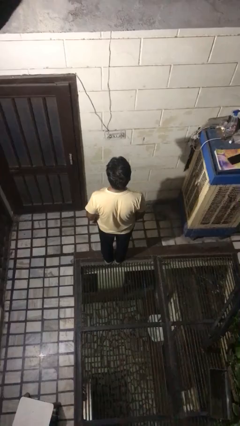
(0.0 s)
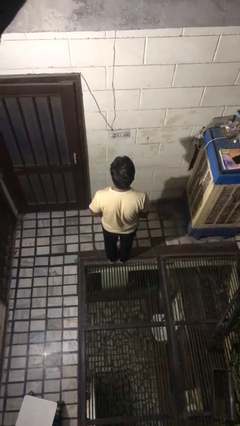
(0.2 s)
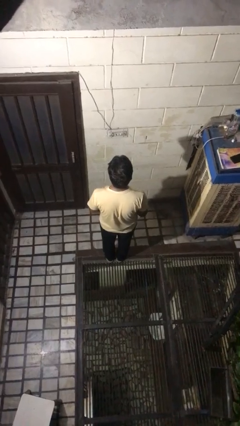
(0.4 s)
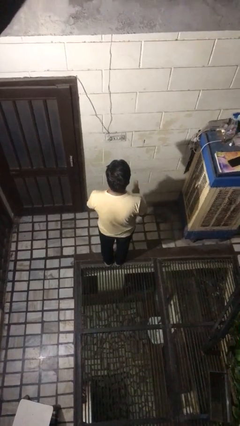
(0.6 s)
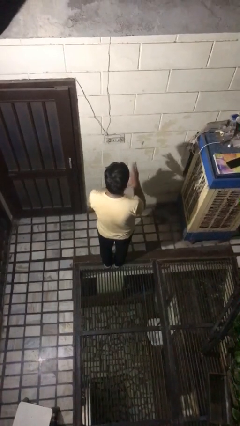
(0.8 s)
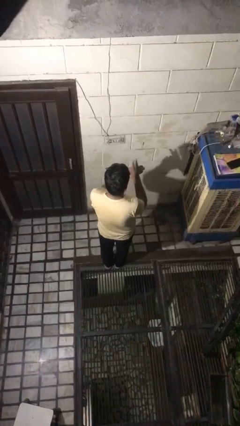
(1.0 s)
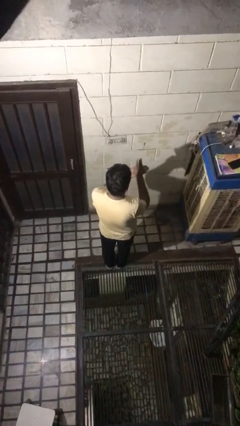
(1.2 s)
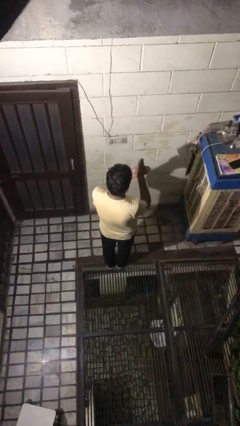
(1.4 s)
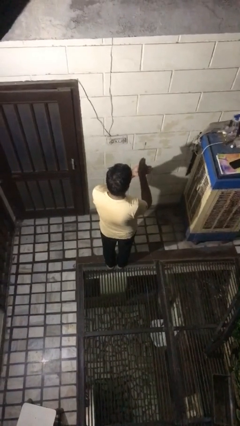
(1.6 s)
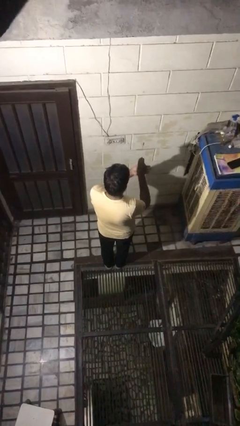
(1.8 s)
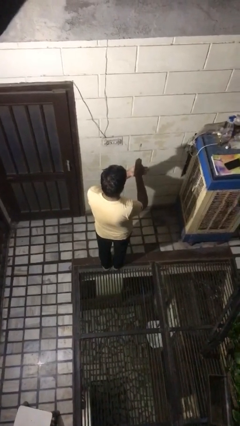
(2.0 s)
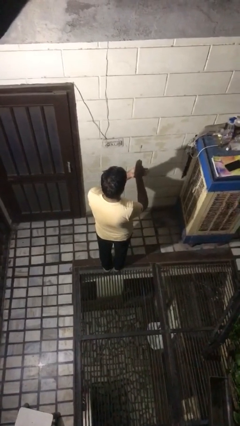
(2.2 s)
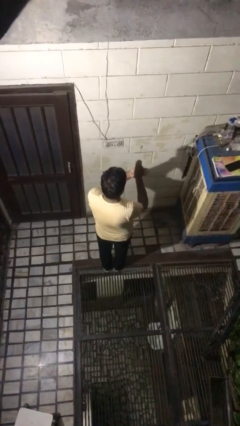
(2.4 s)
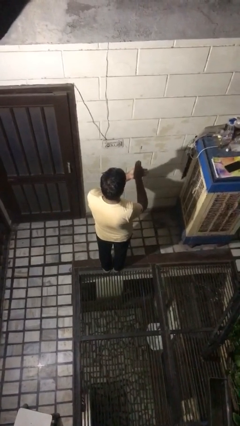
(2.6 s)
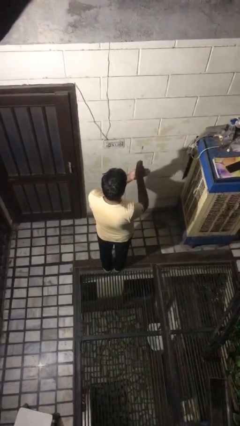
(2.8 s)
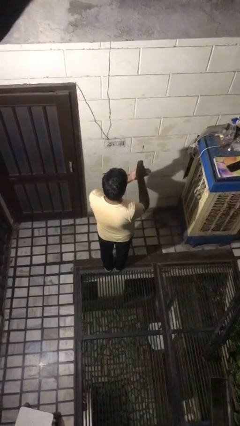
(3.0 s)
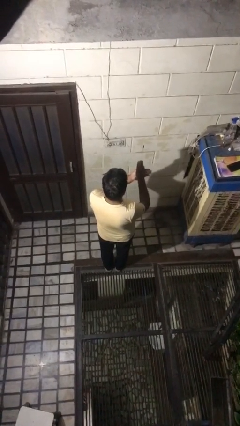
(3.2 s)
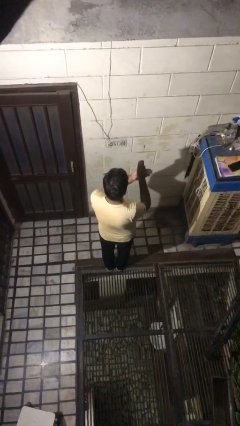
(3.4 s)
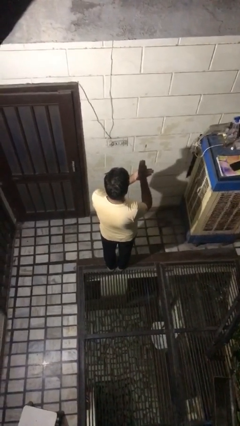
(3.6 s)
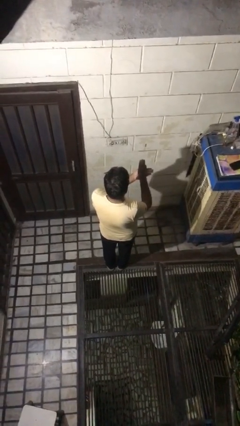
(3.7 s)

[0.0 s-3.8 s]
person gestures number three

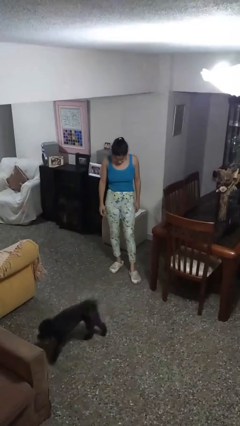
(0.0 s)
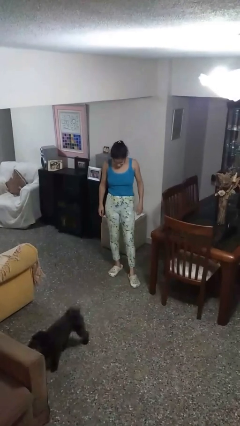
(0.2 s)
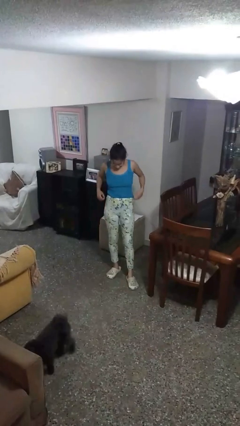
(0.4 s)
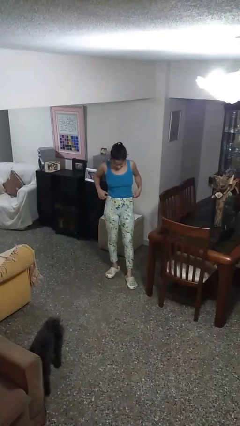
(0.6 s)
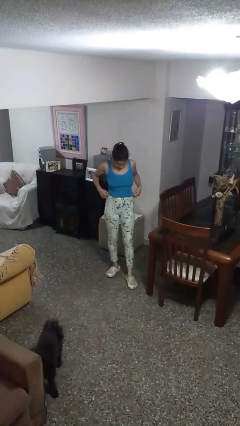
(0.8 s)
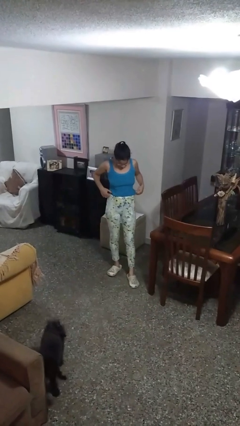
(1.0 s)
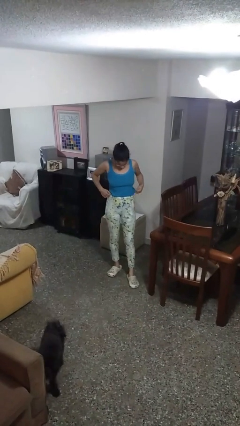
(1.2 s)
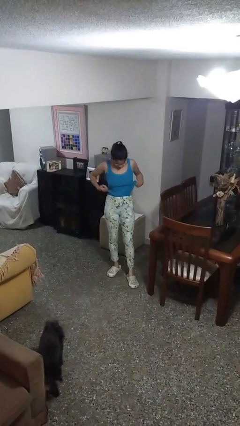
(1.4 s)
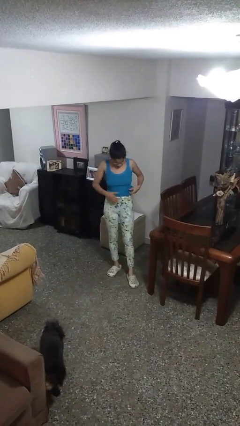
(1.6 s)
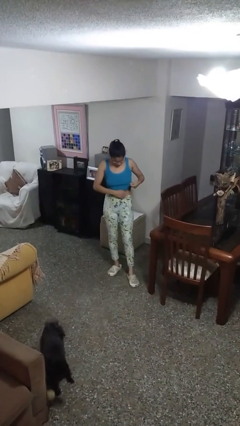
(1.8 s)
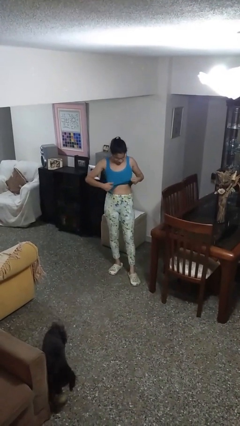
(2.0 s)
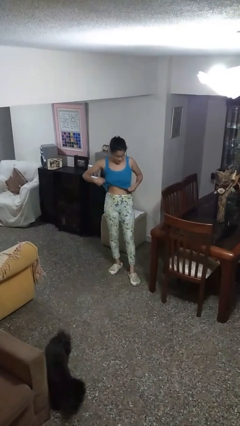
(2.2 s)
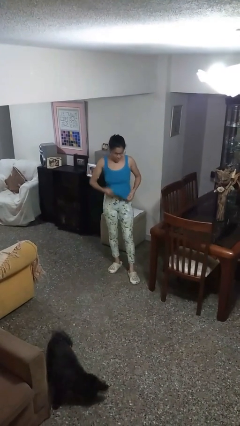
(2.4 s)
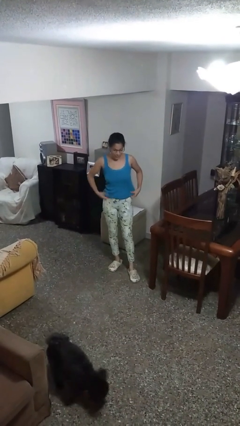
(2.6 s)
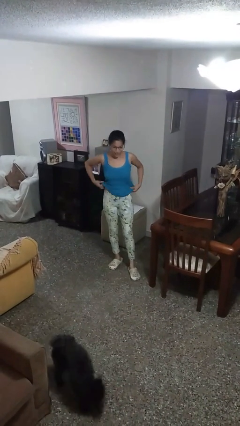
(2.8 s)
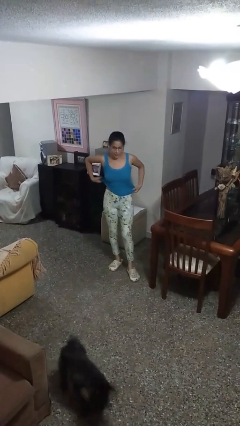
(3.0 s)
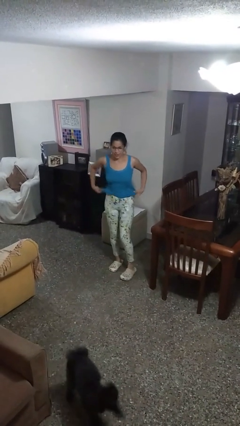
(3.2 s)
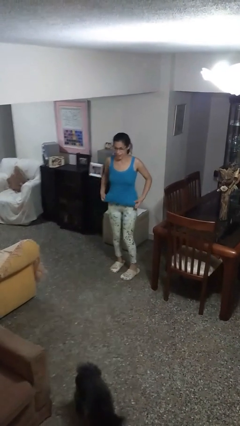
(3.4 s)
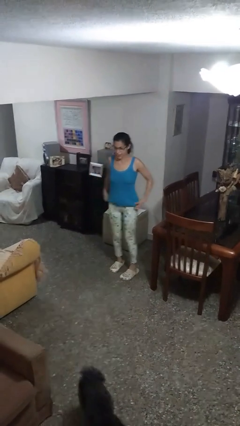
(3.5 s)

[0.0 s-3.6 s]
person untucks shirt

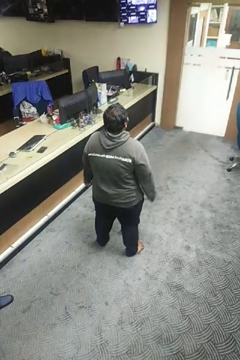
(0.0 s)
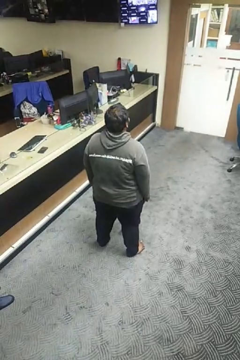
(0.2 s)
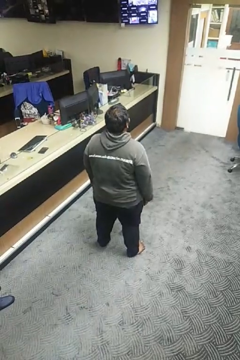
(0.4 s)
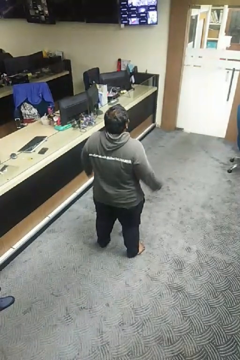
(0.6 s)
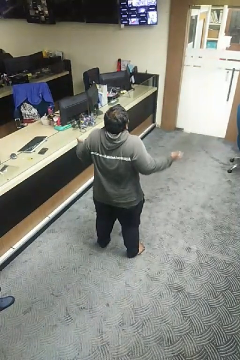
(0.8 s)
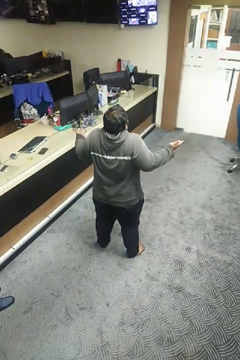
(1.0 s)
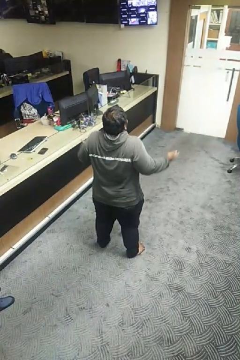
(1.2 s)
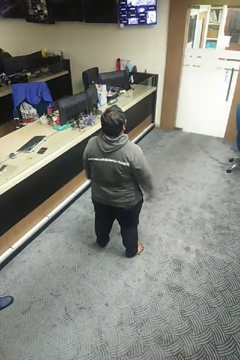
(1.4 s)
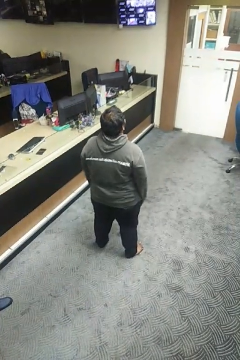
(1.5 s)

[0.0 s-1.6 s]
person shrugs

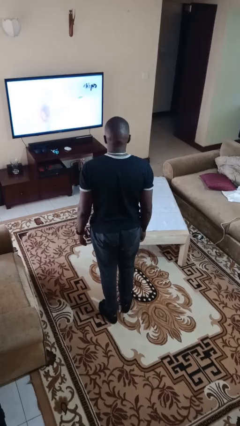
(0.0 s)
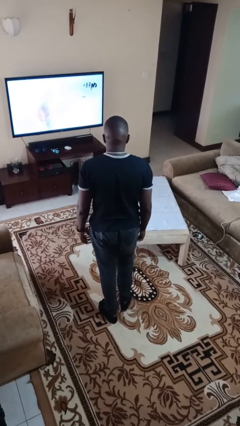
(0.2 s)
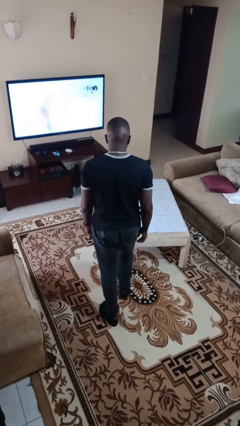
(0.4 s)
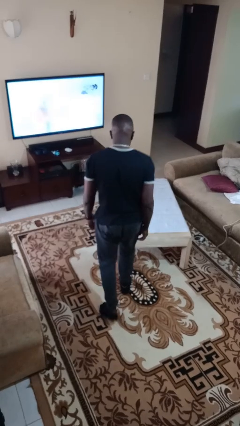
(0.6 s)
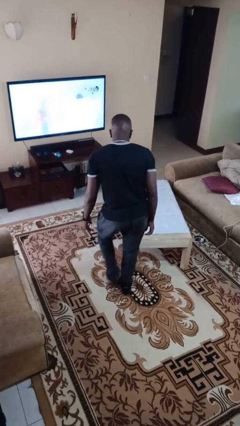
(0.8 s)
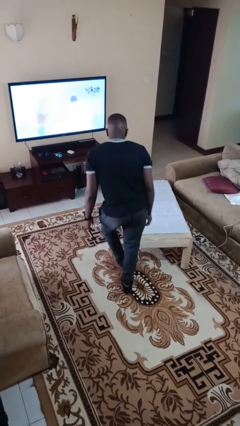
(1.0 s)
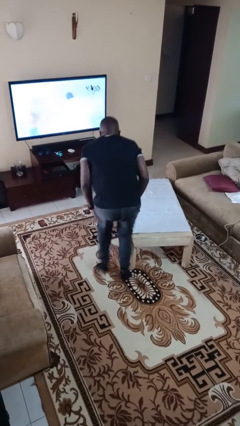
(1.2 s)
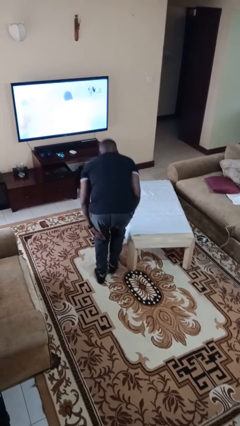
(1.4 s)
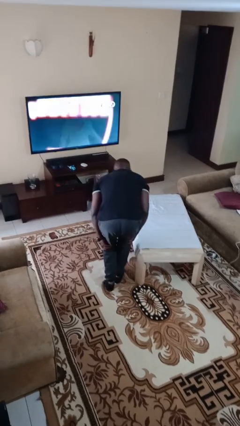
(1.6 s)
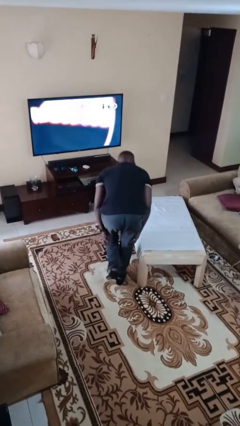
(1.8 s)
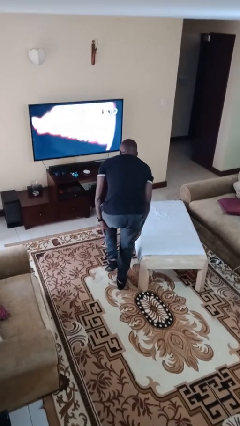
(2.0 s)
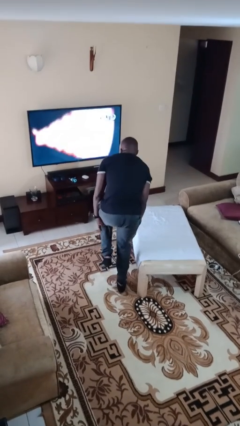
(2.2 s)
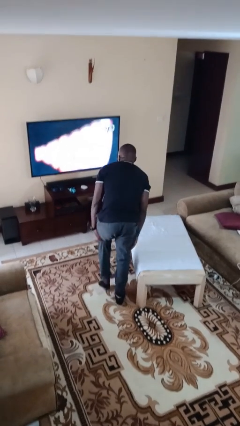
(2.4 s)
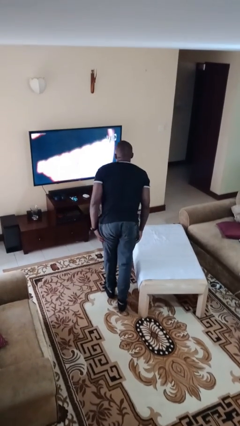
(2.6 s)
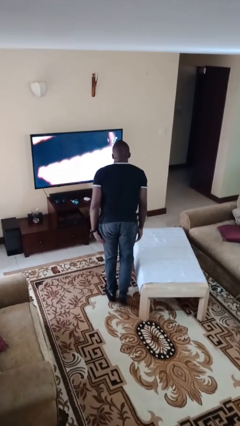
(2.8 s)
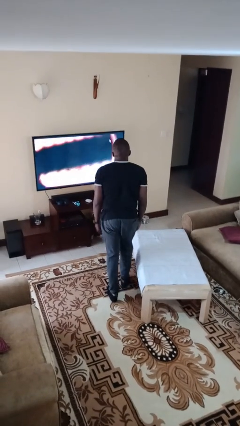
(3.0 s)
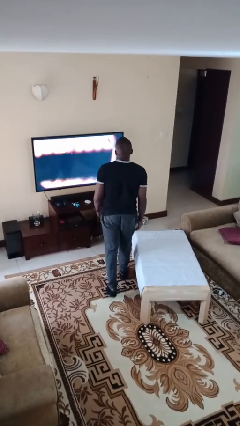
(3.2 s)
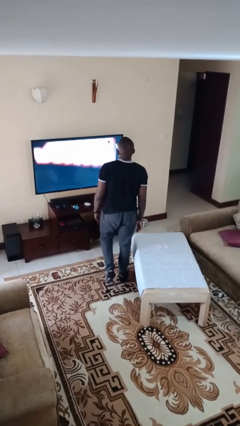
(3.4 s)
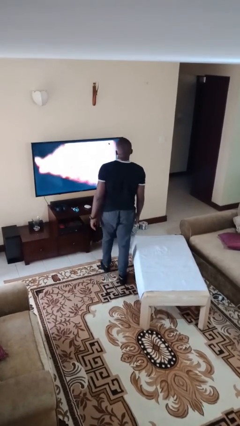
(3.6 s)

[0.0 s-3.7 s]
person bumps into table

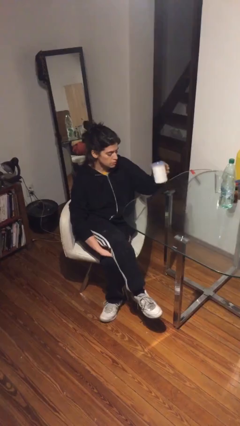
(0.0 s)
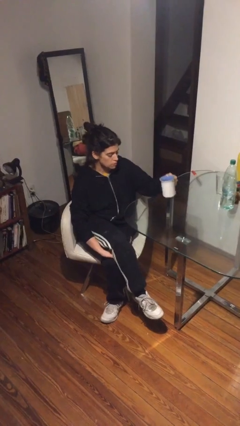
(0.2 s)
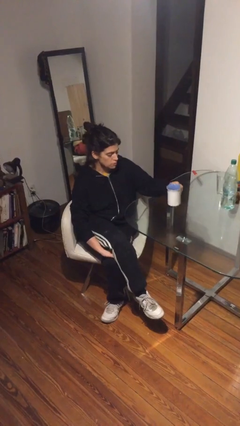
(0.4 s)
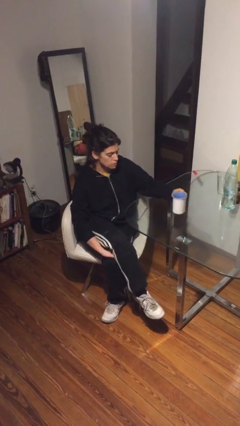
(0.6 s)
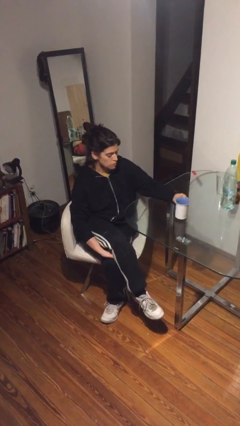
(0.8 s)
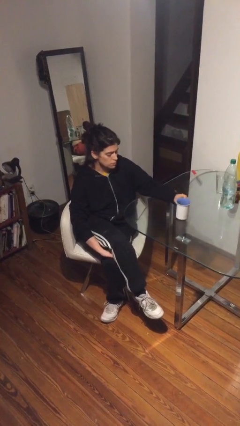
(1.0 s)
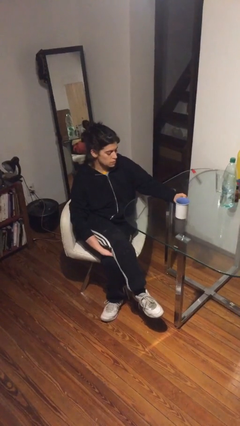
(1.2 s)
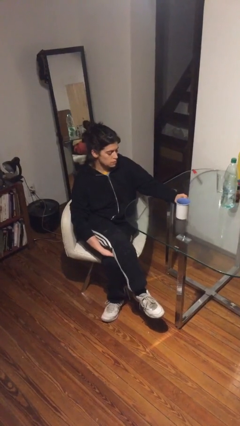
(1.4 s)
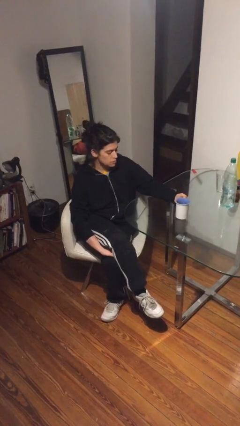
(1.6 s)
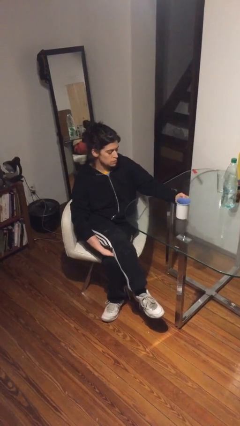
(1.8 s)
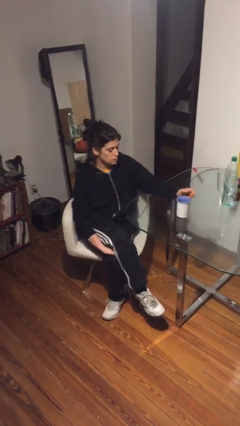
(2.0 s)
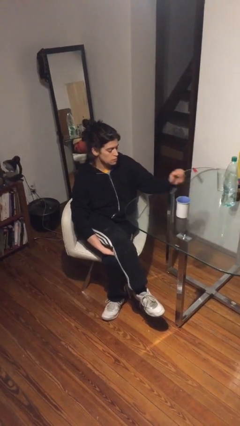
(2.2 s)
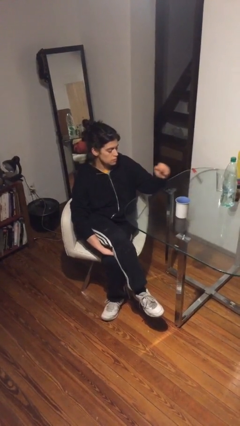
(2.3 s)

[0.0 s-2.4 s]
person puts down object on table

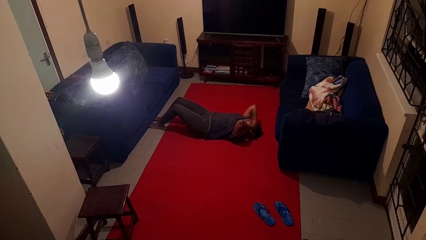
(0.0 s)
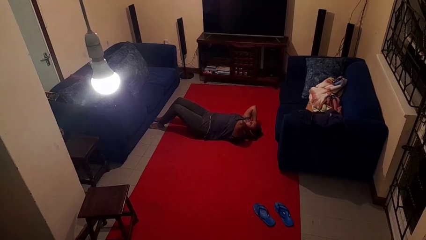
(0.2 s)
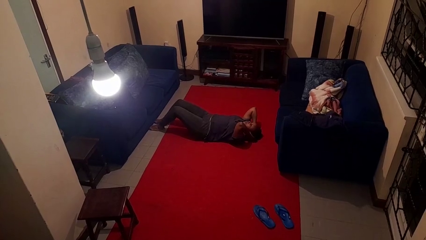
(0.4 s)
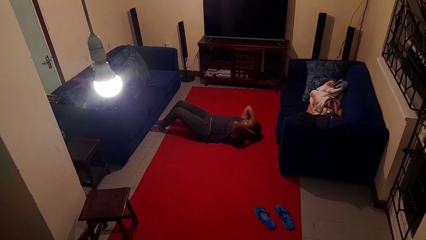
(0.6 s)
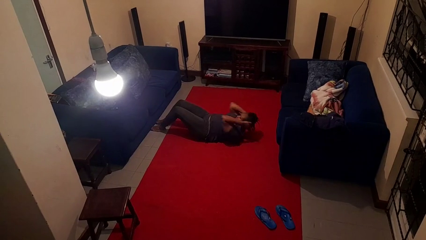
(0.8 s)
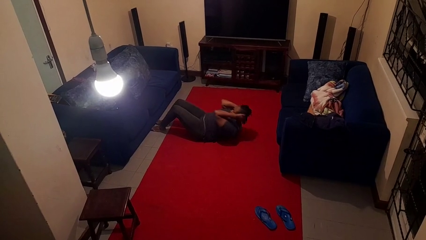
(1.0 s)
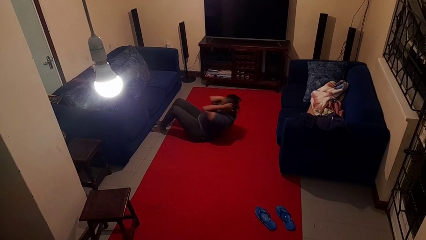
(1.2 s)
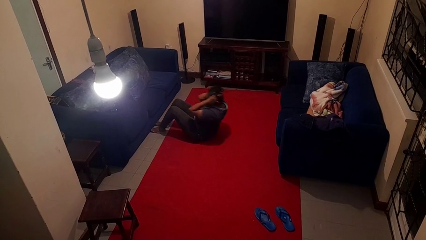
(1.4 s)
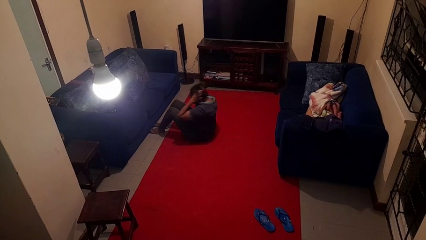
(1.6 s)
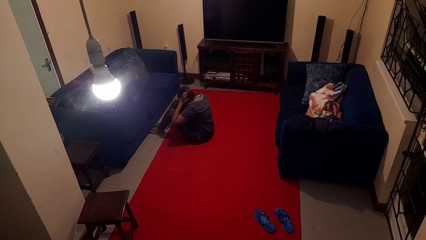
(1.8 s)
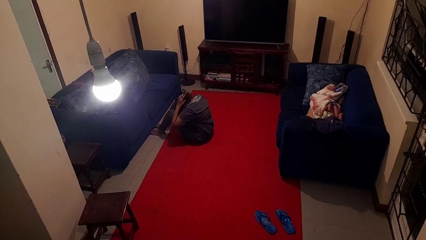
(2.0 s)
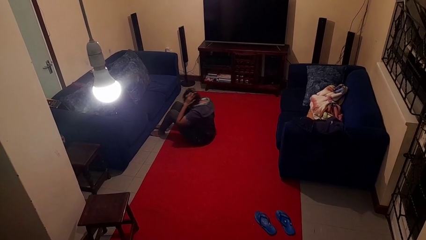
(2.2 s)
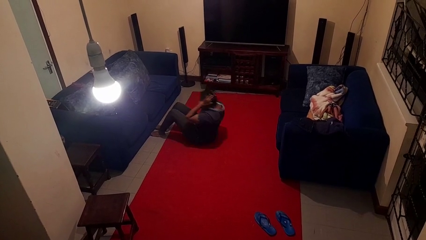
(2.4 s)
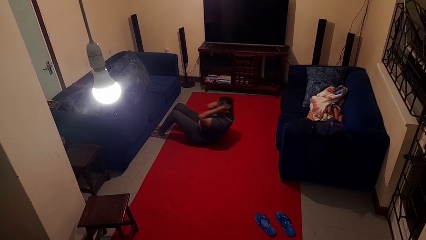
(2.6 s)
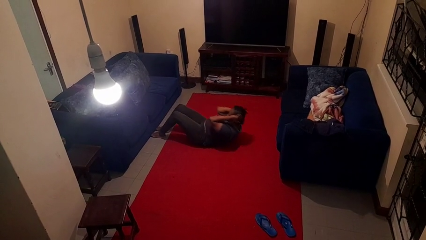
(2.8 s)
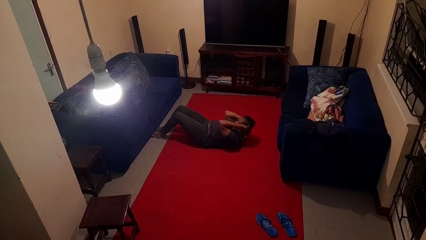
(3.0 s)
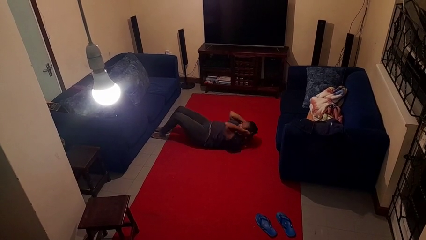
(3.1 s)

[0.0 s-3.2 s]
person exercises with situp
